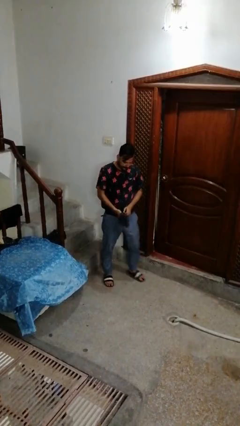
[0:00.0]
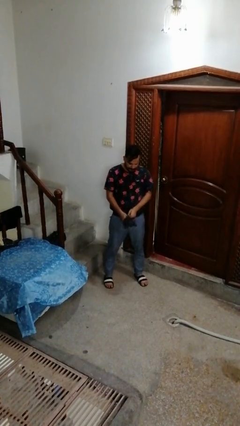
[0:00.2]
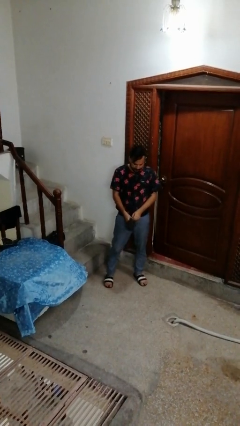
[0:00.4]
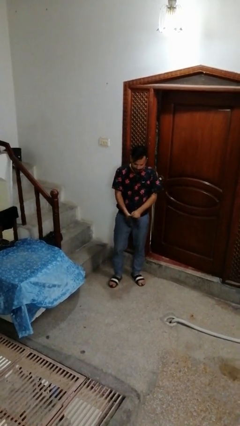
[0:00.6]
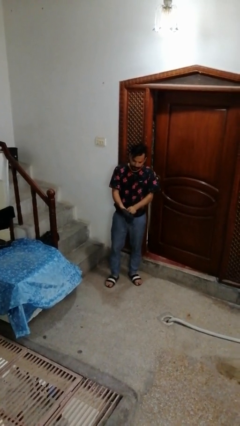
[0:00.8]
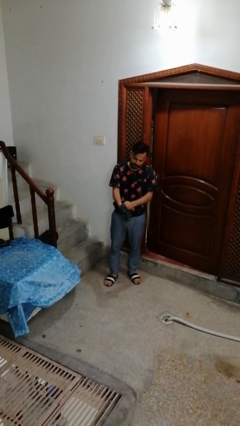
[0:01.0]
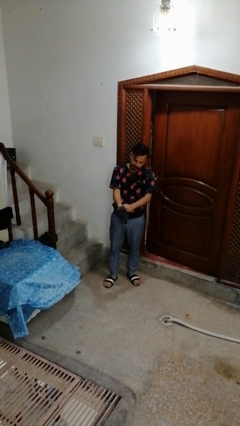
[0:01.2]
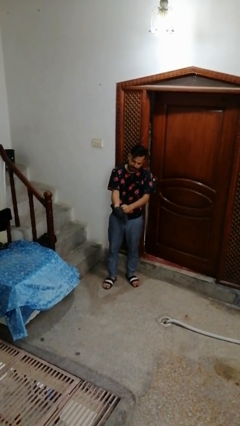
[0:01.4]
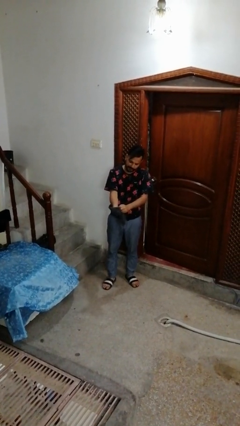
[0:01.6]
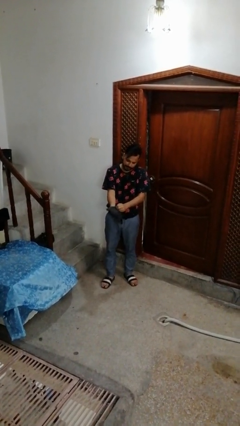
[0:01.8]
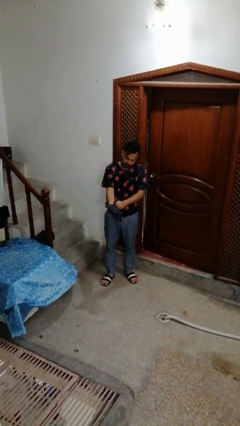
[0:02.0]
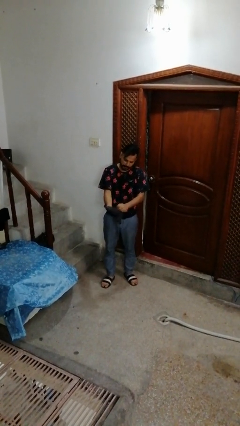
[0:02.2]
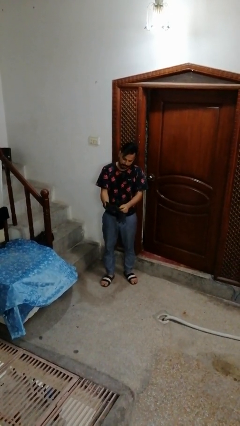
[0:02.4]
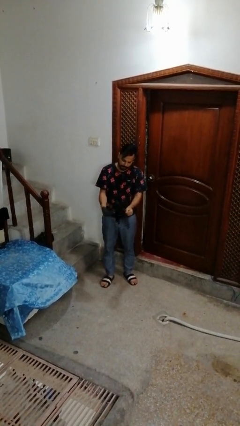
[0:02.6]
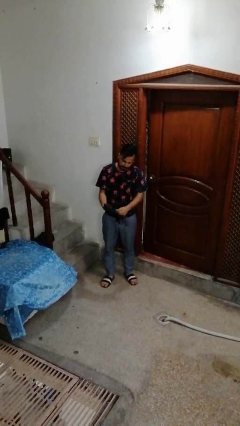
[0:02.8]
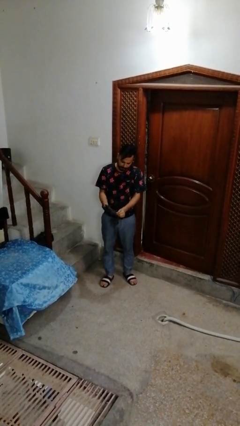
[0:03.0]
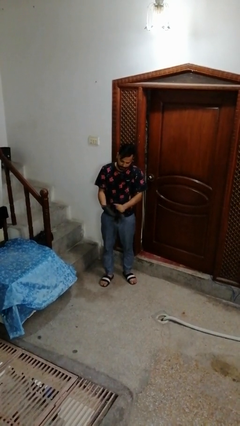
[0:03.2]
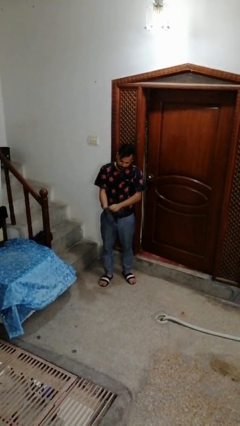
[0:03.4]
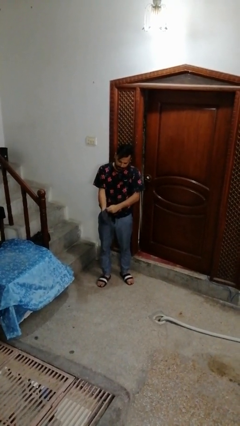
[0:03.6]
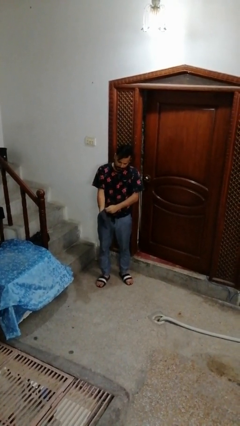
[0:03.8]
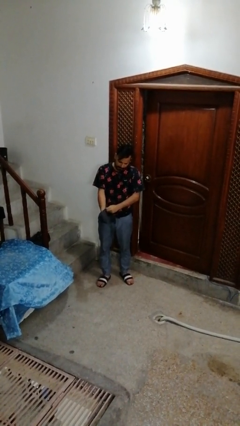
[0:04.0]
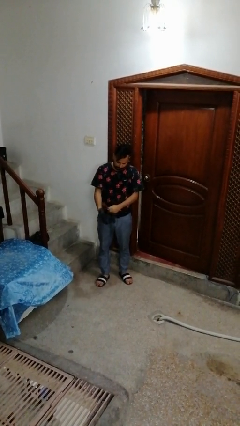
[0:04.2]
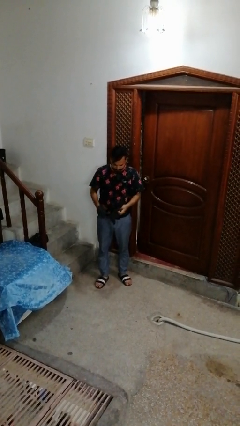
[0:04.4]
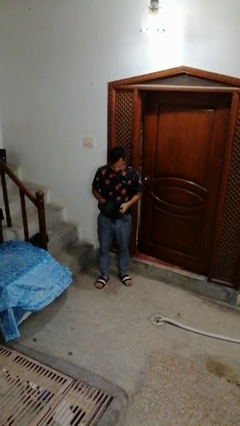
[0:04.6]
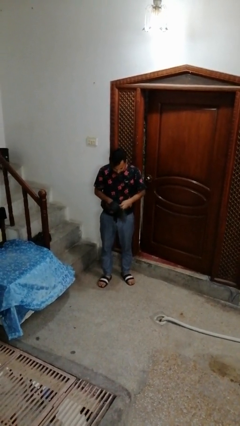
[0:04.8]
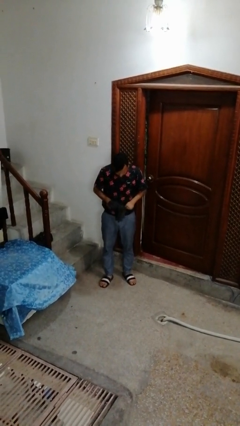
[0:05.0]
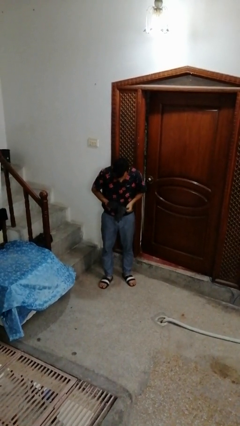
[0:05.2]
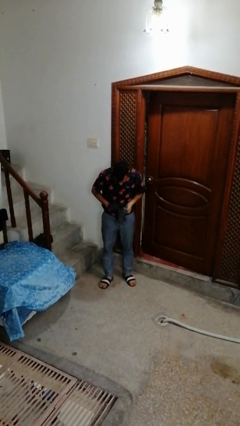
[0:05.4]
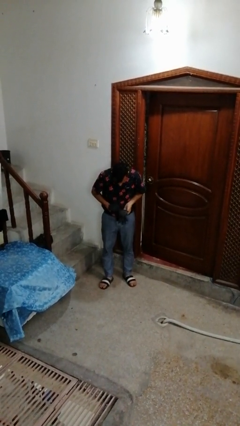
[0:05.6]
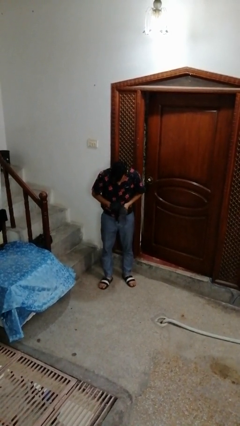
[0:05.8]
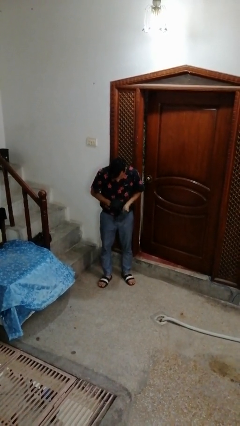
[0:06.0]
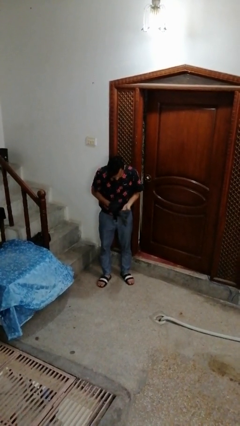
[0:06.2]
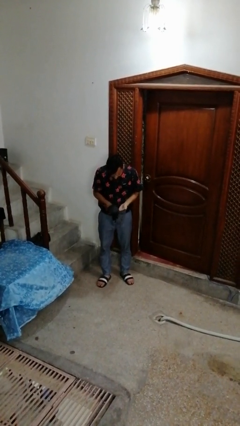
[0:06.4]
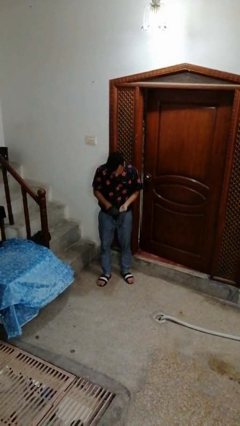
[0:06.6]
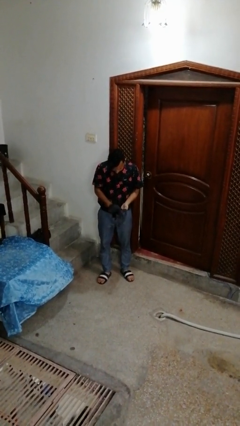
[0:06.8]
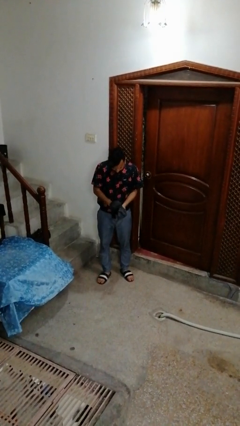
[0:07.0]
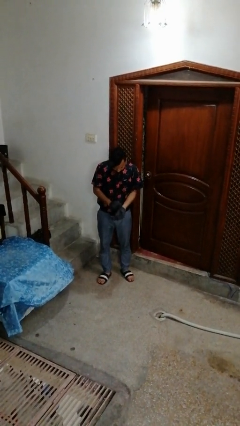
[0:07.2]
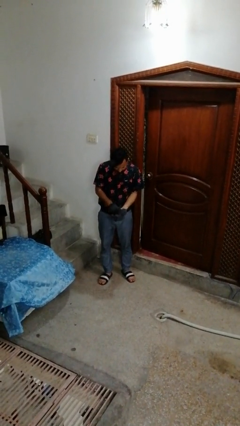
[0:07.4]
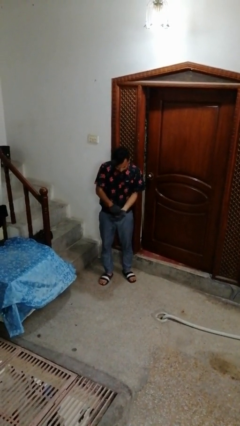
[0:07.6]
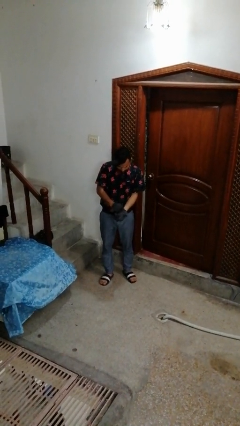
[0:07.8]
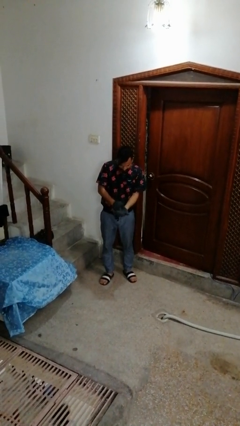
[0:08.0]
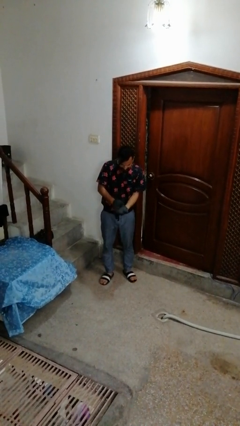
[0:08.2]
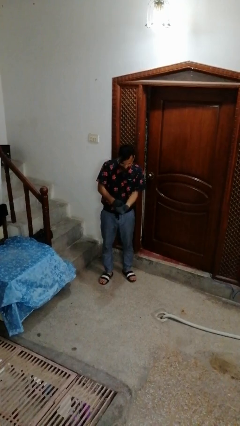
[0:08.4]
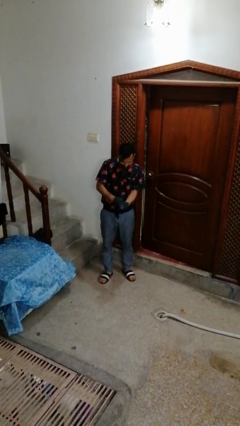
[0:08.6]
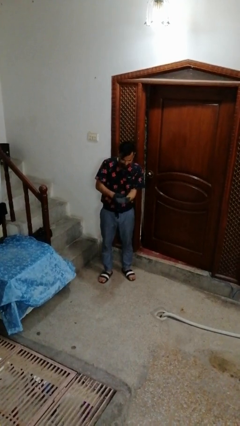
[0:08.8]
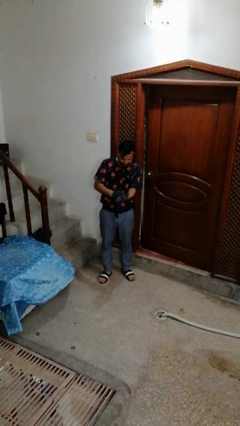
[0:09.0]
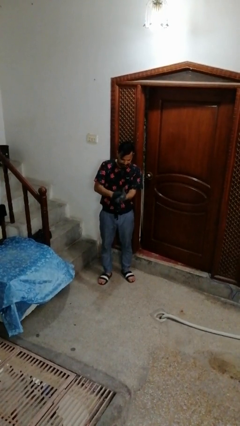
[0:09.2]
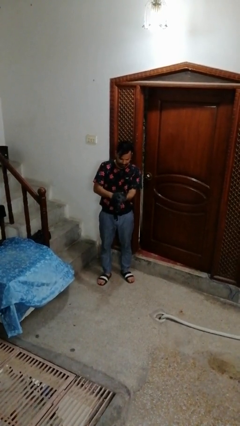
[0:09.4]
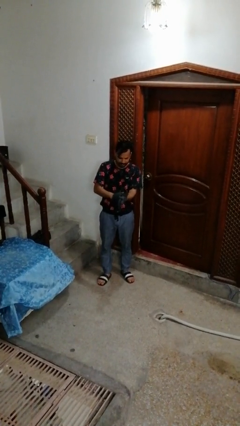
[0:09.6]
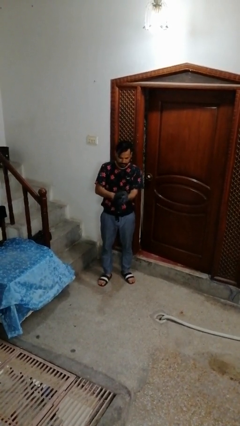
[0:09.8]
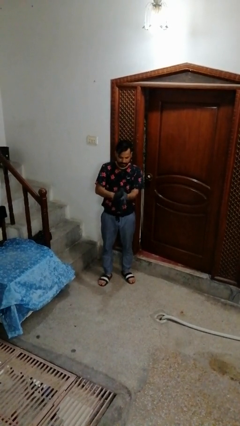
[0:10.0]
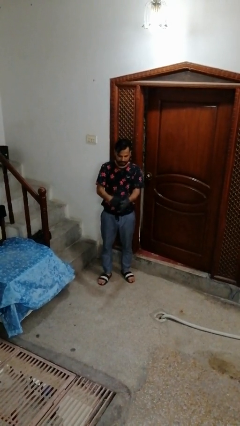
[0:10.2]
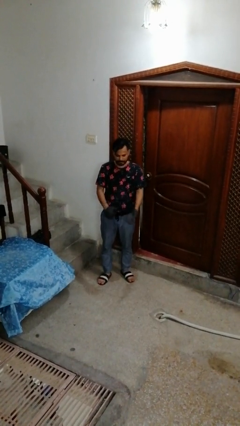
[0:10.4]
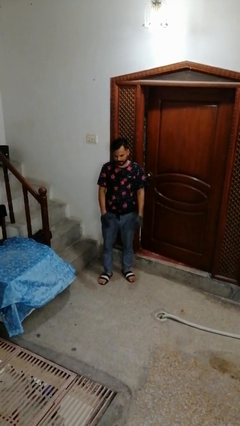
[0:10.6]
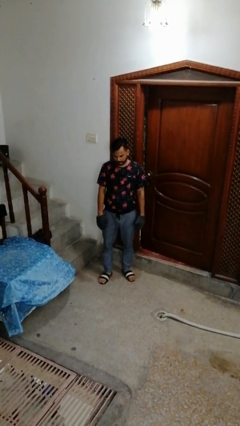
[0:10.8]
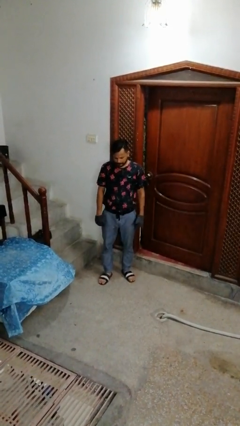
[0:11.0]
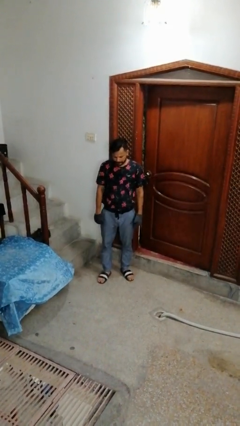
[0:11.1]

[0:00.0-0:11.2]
person puts on gloves

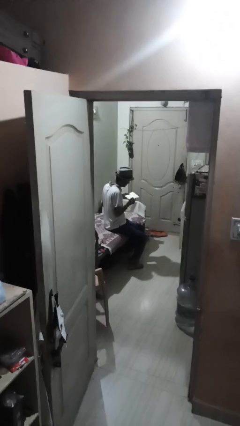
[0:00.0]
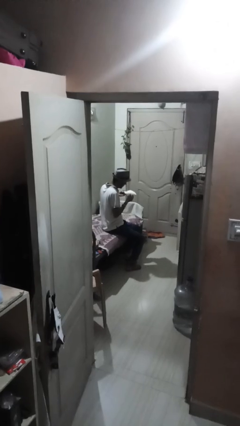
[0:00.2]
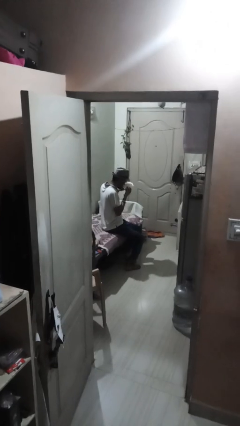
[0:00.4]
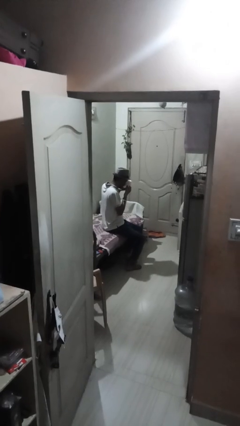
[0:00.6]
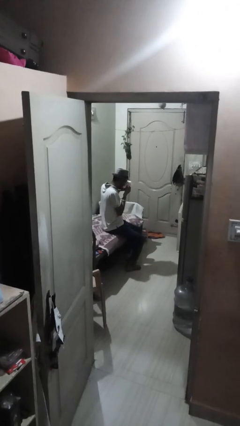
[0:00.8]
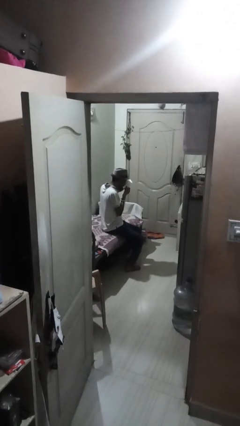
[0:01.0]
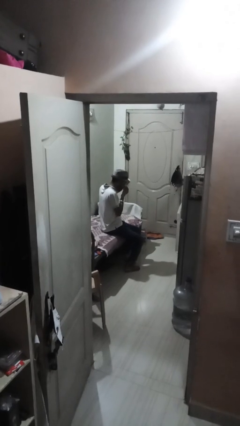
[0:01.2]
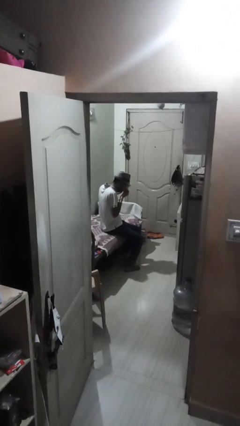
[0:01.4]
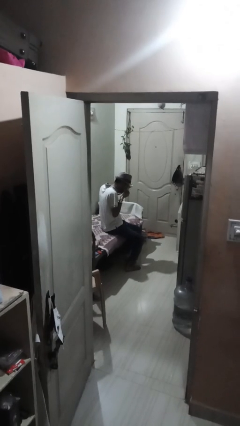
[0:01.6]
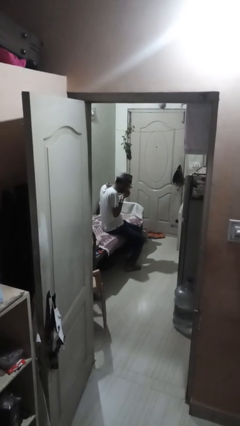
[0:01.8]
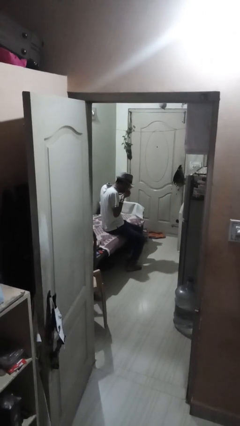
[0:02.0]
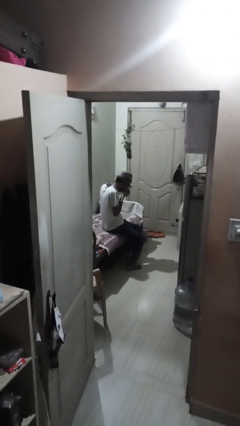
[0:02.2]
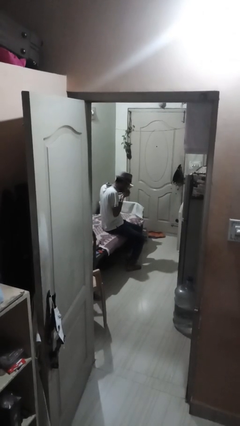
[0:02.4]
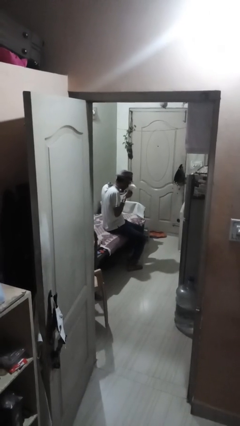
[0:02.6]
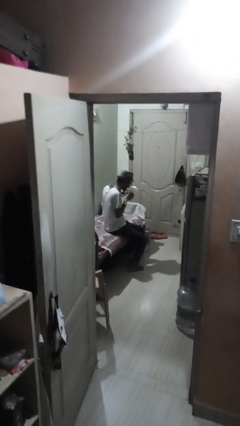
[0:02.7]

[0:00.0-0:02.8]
person blows nose

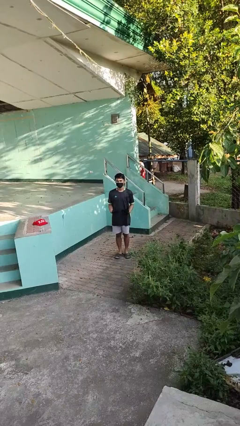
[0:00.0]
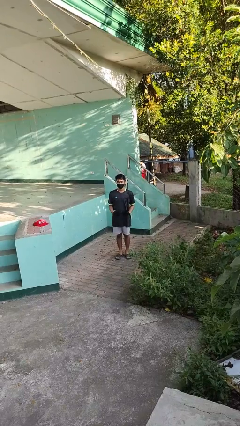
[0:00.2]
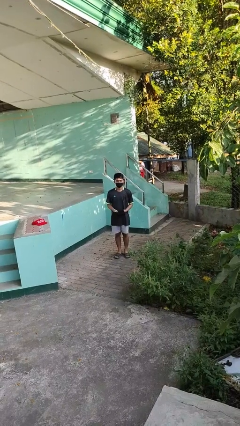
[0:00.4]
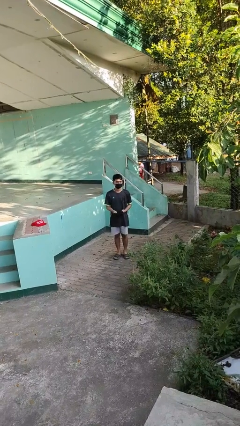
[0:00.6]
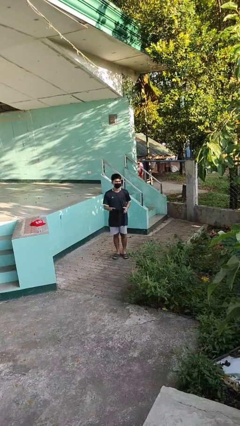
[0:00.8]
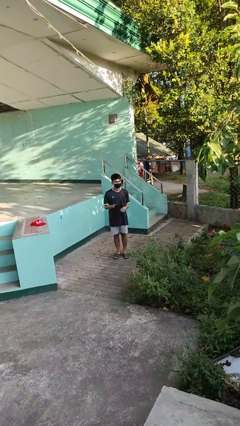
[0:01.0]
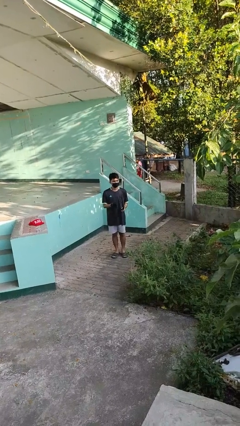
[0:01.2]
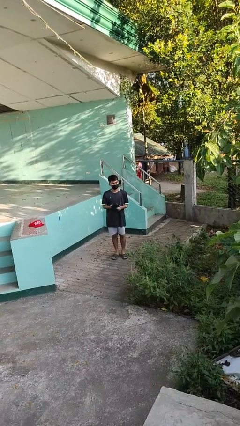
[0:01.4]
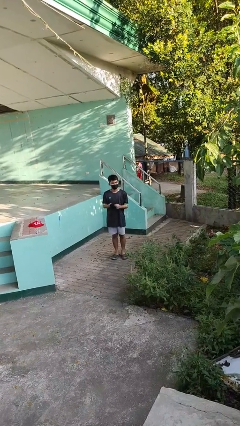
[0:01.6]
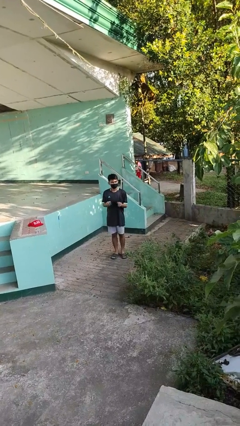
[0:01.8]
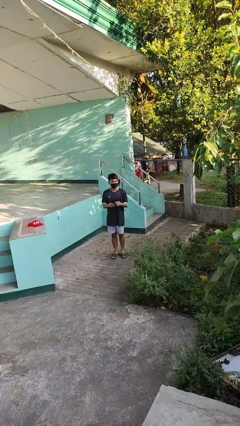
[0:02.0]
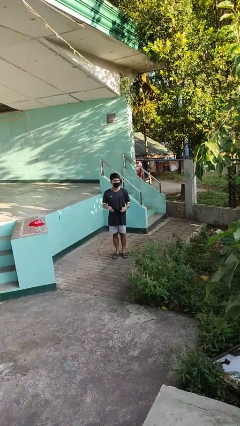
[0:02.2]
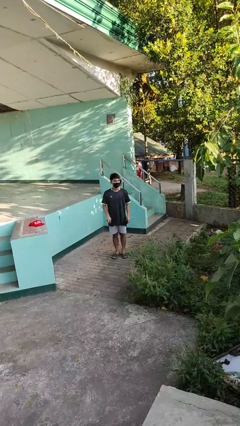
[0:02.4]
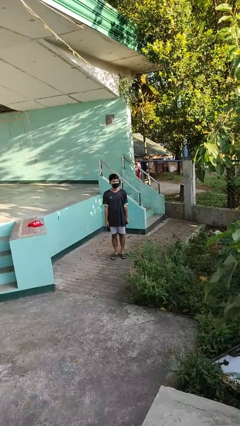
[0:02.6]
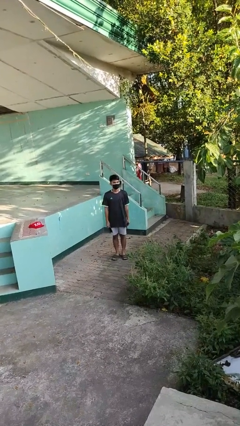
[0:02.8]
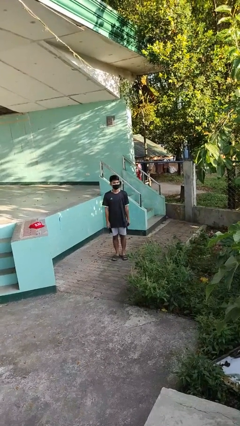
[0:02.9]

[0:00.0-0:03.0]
person takes off gloves

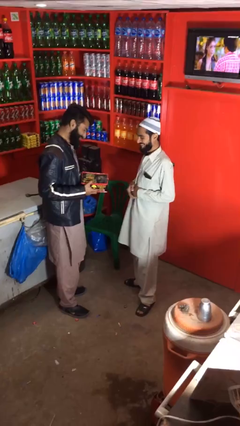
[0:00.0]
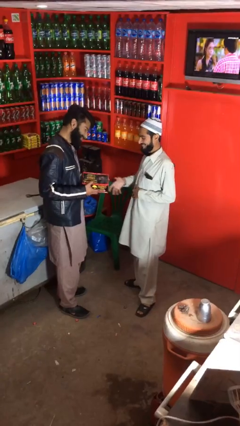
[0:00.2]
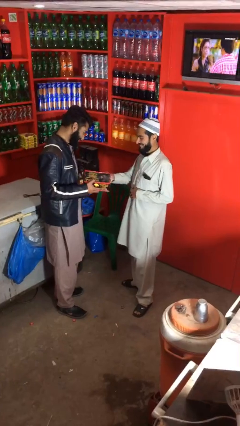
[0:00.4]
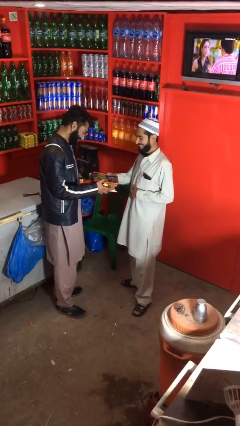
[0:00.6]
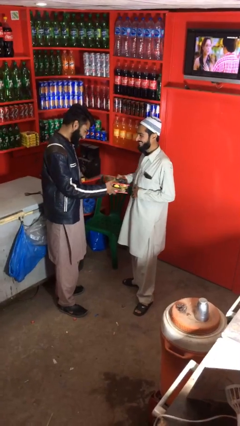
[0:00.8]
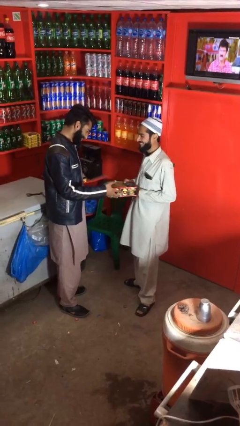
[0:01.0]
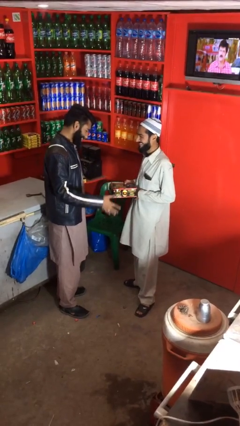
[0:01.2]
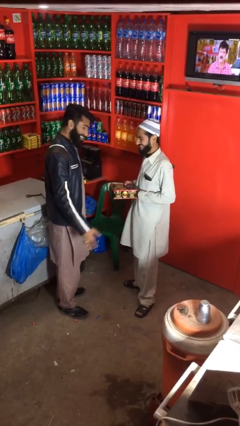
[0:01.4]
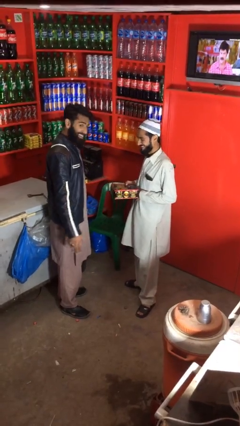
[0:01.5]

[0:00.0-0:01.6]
person transfers object to person
